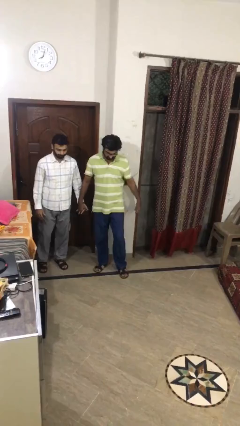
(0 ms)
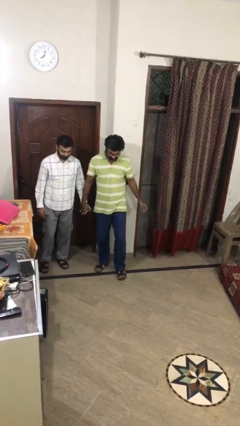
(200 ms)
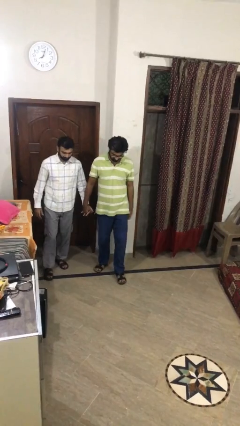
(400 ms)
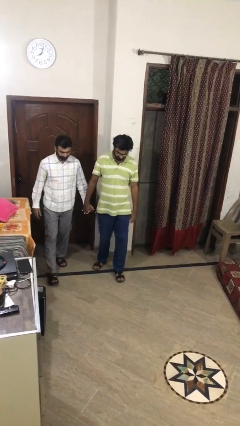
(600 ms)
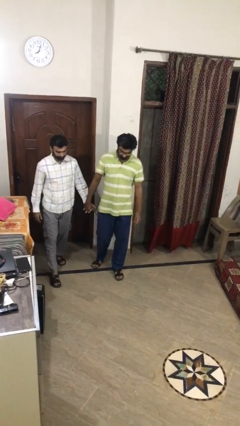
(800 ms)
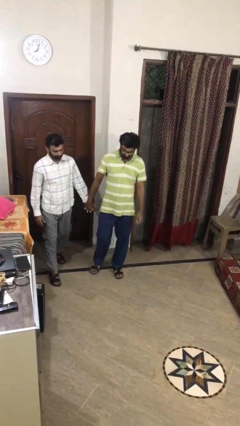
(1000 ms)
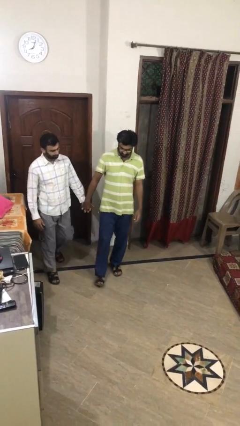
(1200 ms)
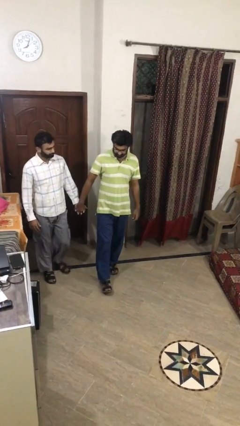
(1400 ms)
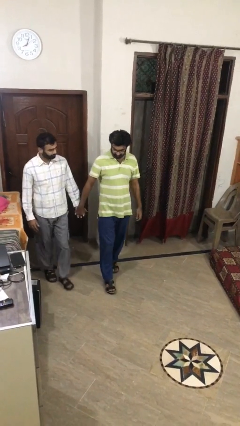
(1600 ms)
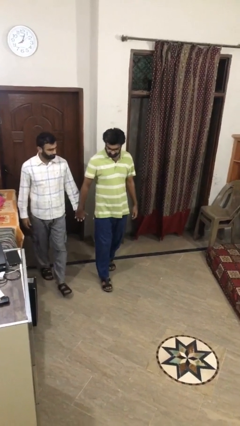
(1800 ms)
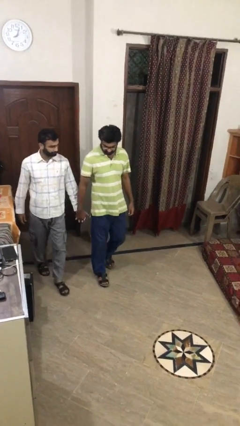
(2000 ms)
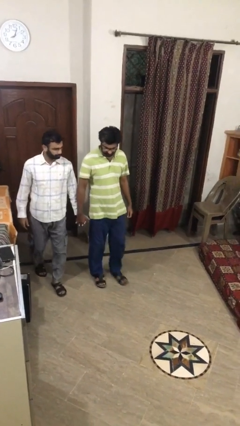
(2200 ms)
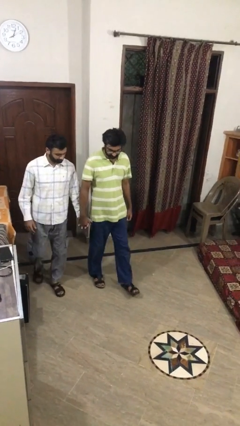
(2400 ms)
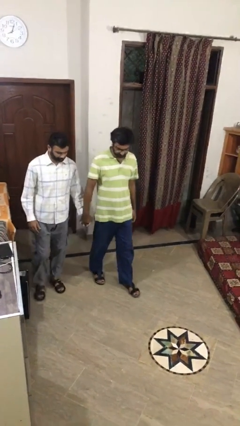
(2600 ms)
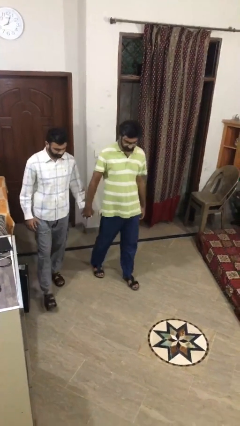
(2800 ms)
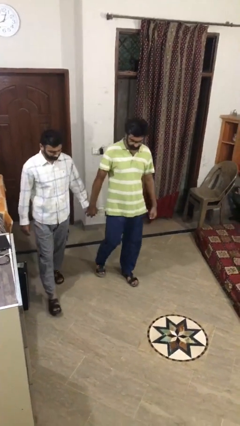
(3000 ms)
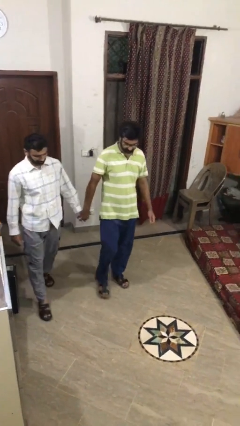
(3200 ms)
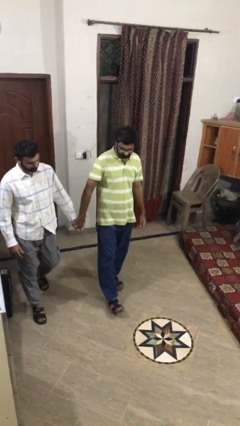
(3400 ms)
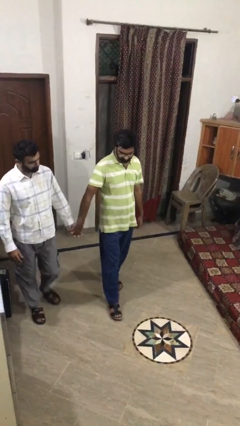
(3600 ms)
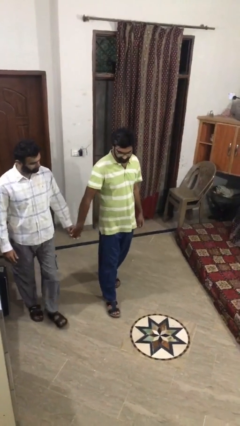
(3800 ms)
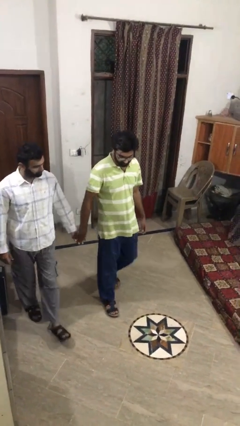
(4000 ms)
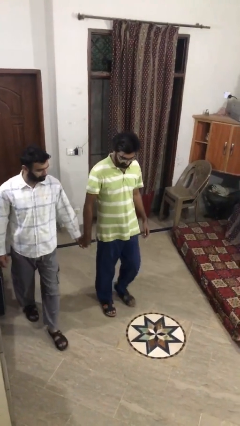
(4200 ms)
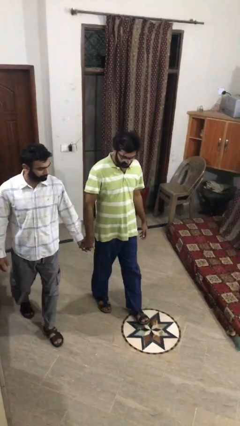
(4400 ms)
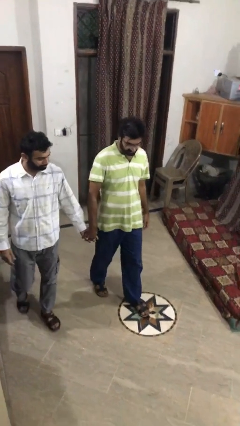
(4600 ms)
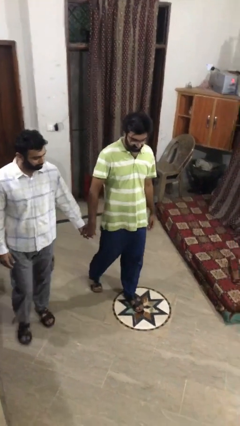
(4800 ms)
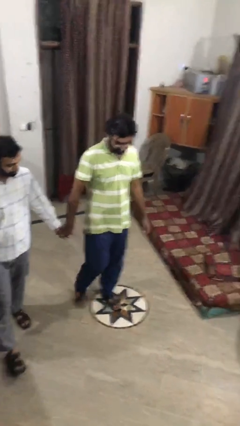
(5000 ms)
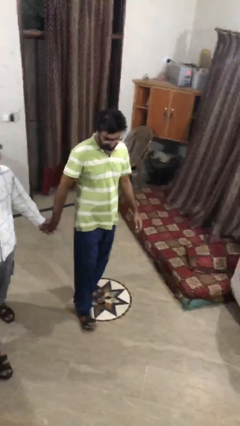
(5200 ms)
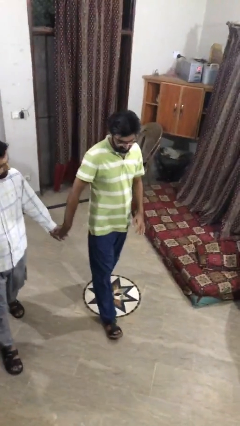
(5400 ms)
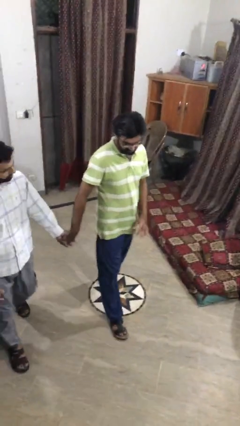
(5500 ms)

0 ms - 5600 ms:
person holds hand

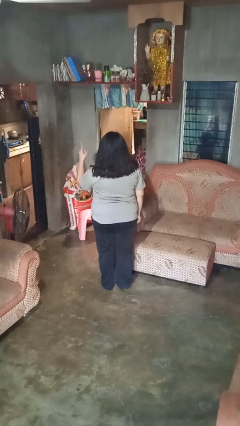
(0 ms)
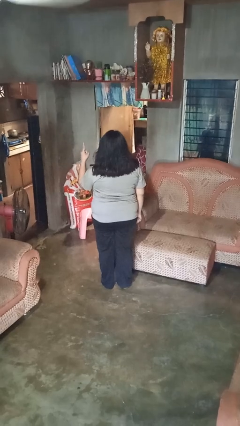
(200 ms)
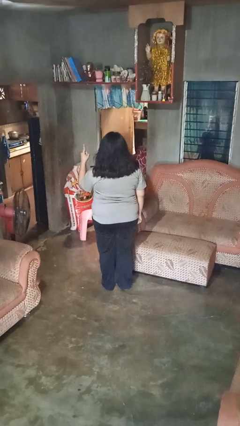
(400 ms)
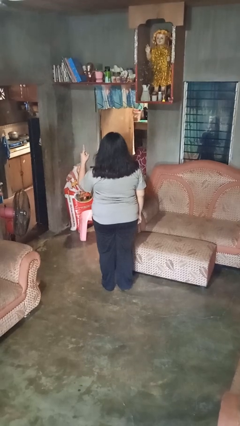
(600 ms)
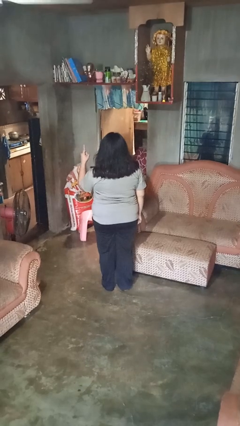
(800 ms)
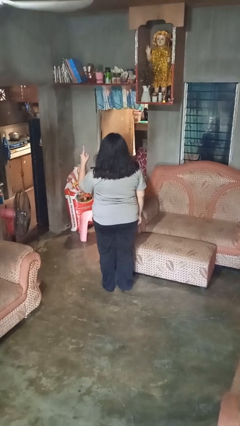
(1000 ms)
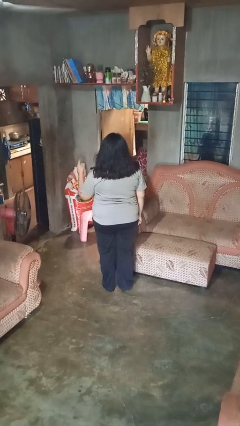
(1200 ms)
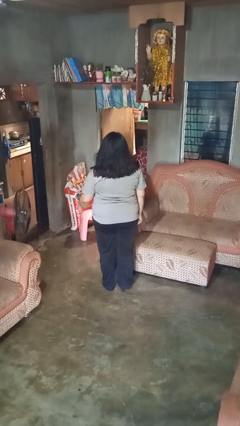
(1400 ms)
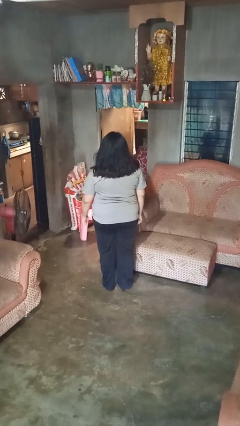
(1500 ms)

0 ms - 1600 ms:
person gestures number one

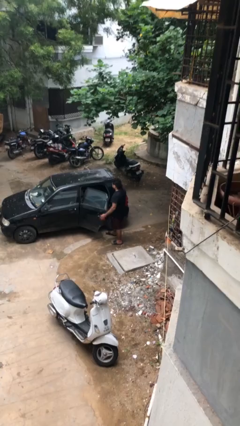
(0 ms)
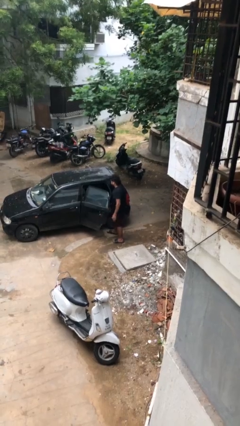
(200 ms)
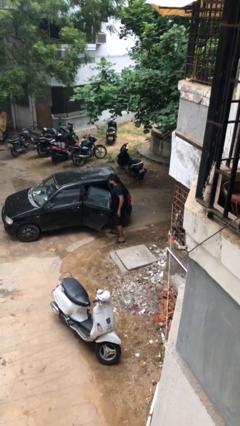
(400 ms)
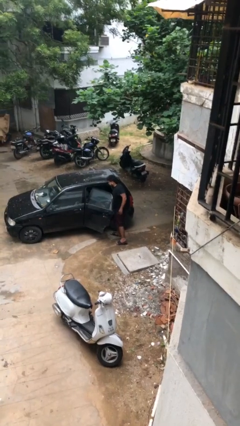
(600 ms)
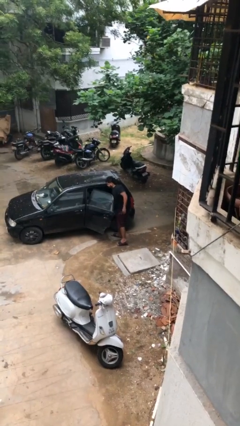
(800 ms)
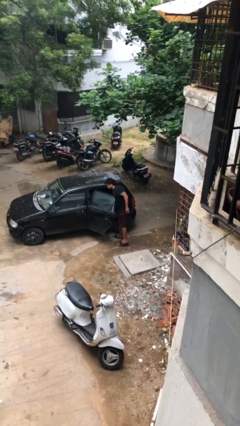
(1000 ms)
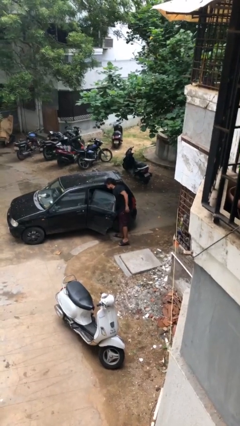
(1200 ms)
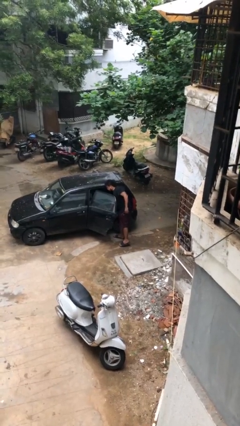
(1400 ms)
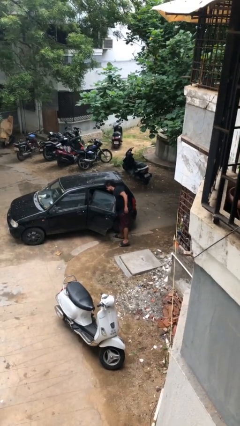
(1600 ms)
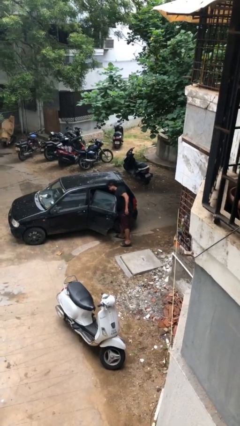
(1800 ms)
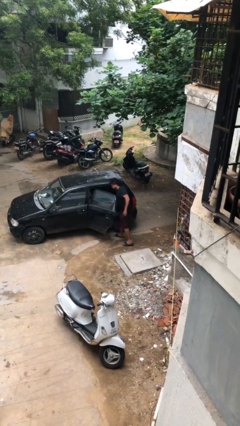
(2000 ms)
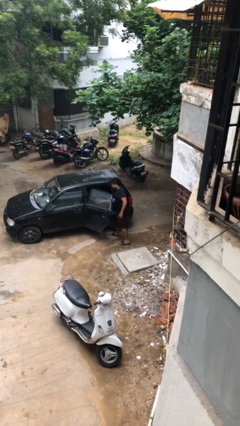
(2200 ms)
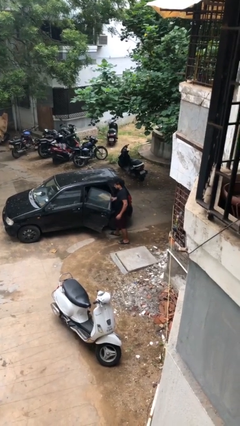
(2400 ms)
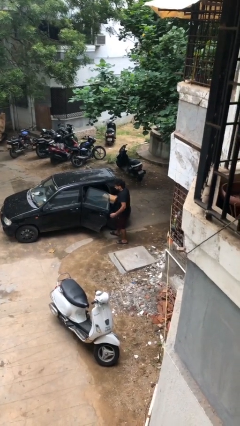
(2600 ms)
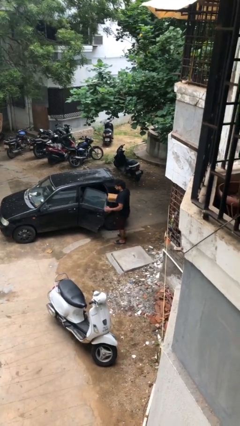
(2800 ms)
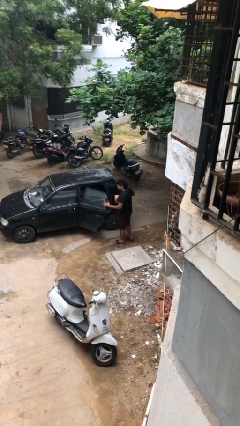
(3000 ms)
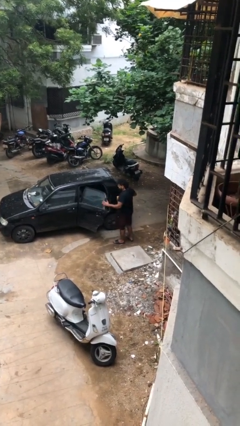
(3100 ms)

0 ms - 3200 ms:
person unloads car

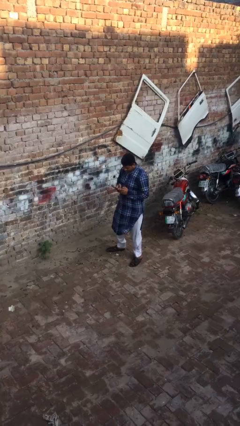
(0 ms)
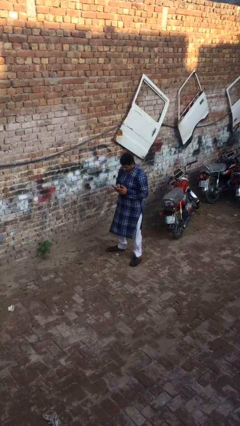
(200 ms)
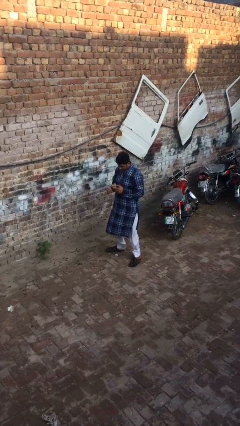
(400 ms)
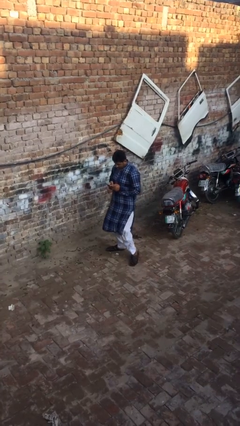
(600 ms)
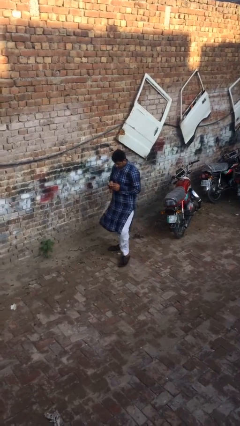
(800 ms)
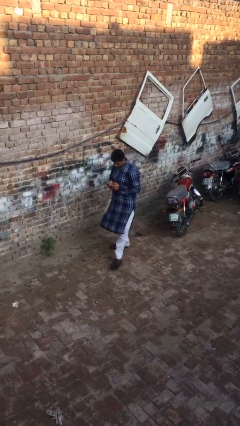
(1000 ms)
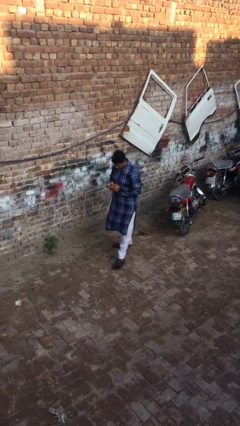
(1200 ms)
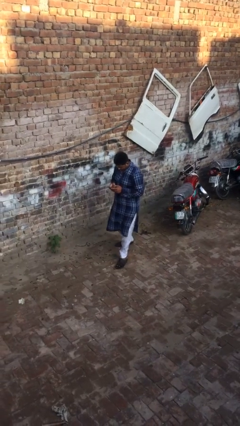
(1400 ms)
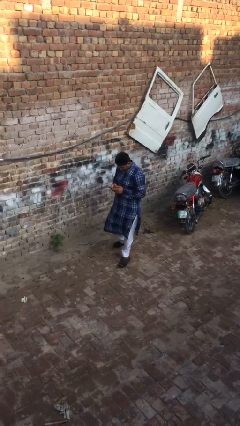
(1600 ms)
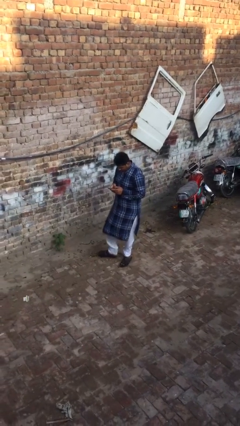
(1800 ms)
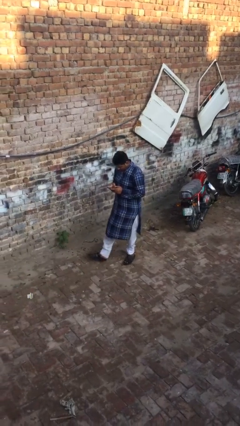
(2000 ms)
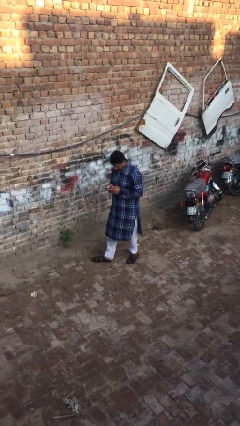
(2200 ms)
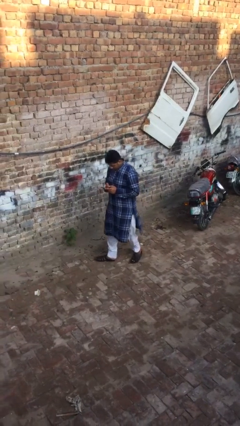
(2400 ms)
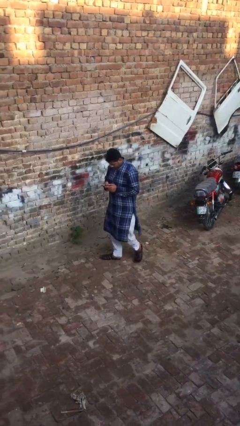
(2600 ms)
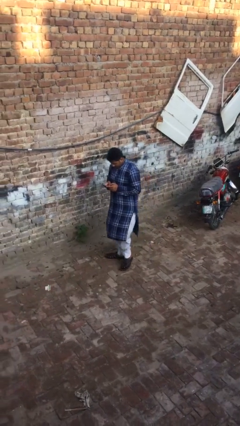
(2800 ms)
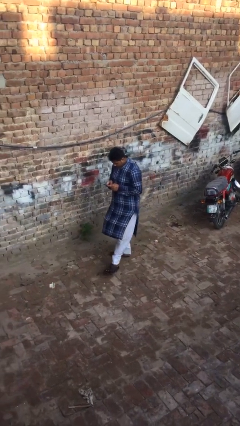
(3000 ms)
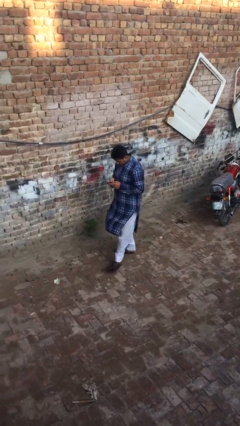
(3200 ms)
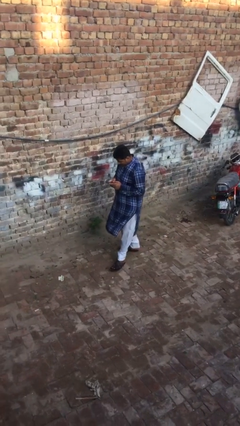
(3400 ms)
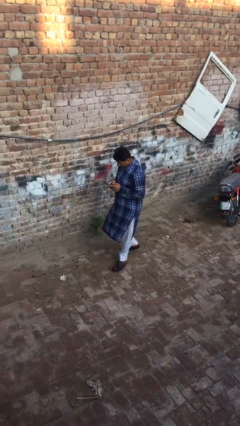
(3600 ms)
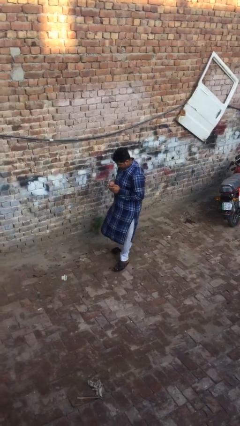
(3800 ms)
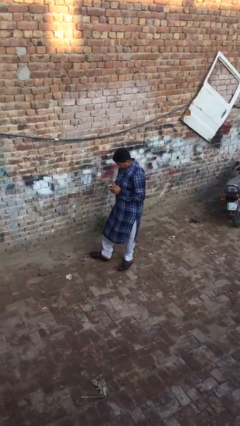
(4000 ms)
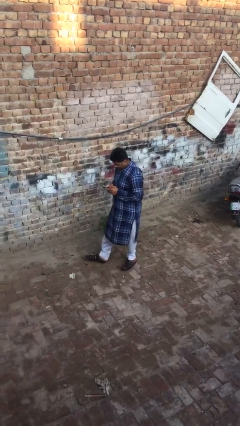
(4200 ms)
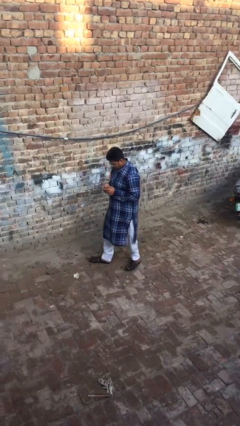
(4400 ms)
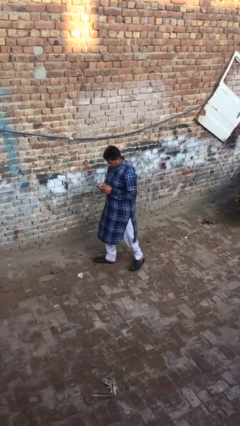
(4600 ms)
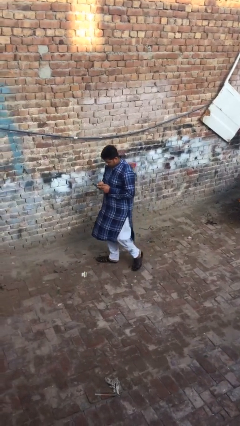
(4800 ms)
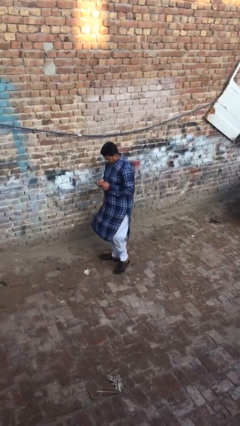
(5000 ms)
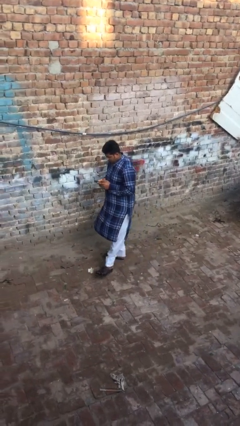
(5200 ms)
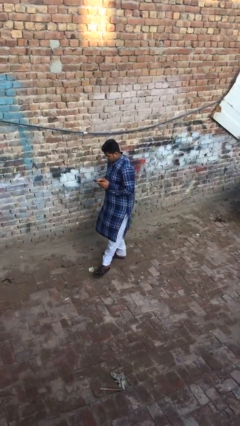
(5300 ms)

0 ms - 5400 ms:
person texts on phone

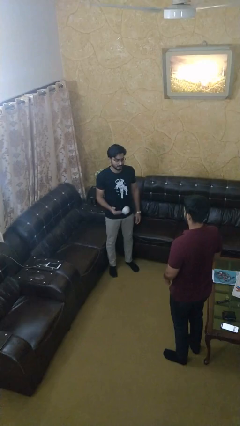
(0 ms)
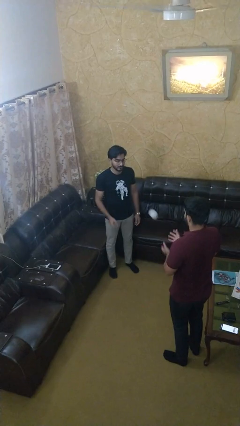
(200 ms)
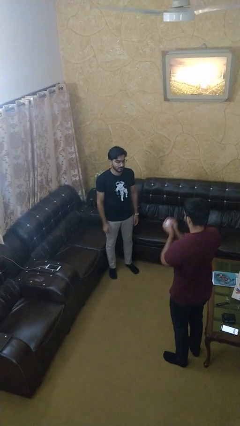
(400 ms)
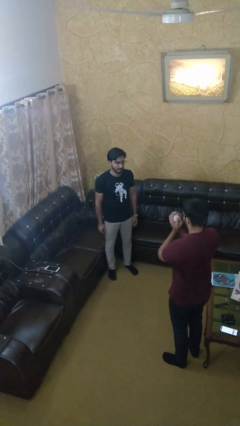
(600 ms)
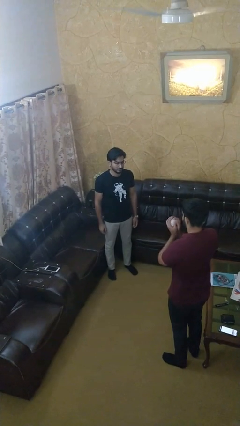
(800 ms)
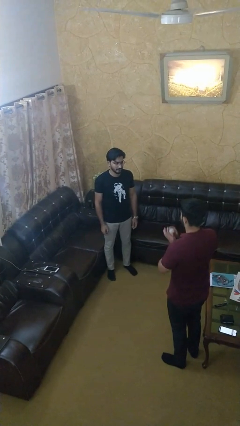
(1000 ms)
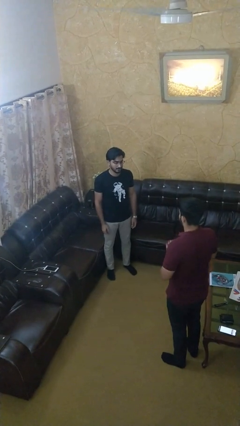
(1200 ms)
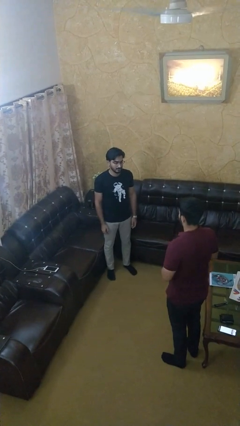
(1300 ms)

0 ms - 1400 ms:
person throws object to person

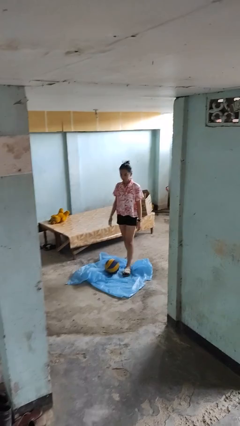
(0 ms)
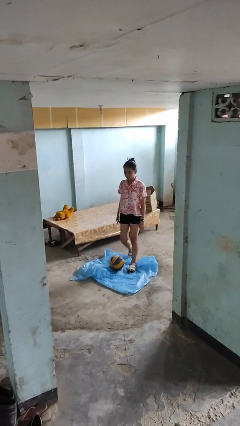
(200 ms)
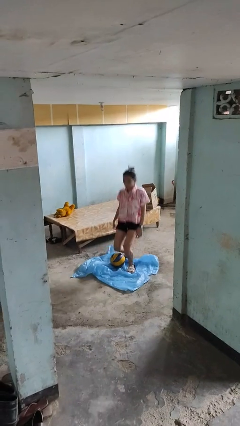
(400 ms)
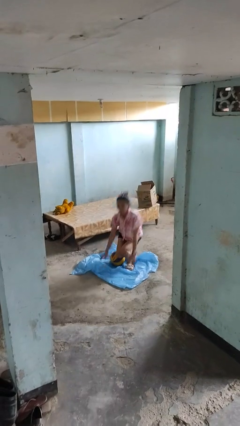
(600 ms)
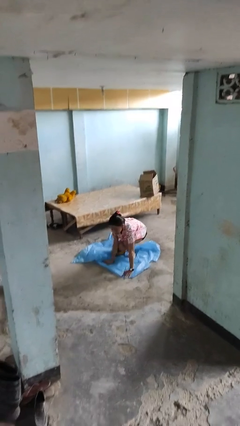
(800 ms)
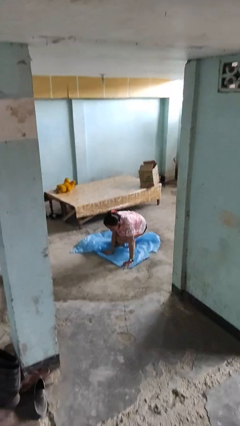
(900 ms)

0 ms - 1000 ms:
person trips on object on floor
